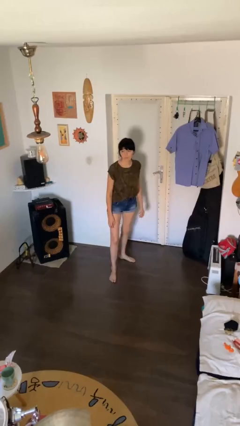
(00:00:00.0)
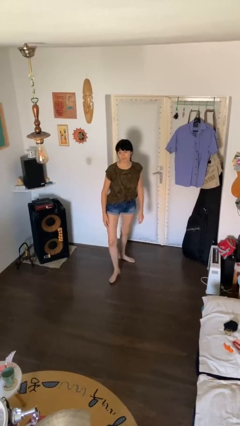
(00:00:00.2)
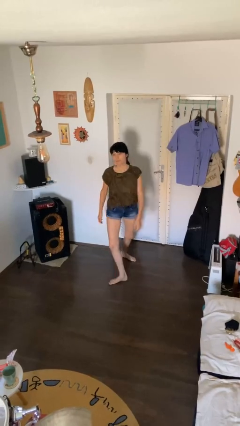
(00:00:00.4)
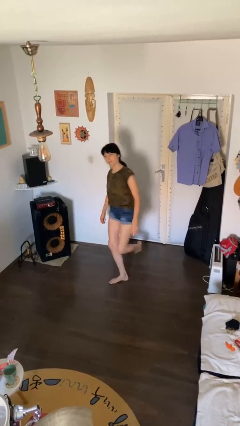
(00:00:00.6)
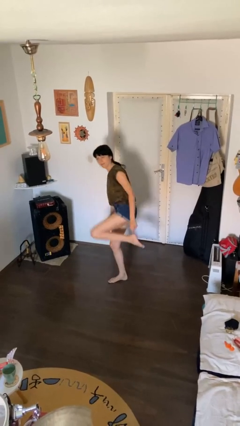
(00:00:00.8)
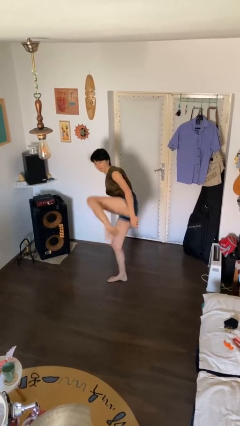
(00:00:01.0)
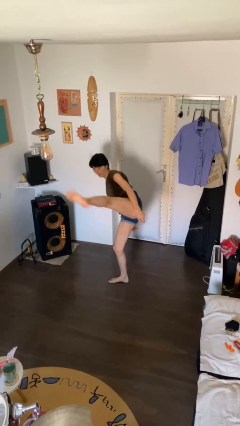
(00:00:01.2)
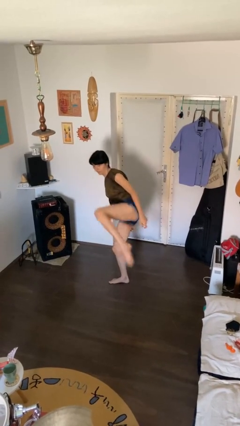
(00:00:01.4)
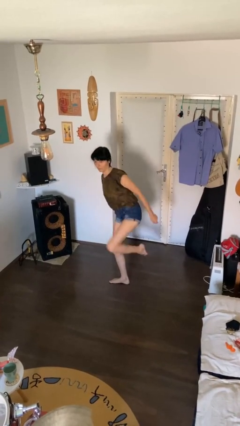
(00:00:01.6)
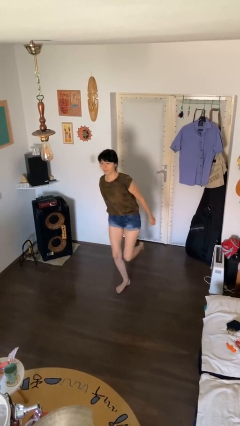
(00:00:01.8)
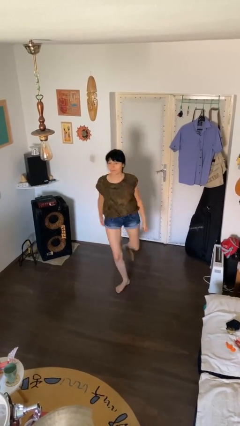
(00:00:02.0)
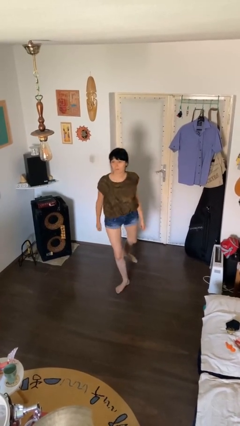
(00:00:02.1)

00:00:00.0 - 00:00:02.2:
person karate kicks

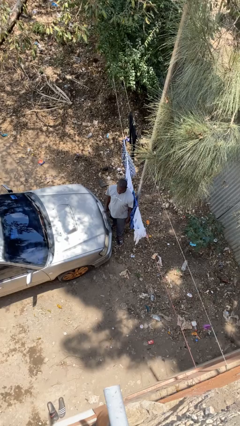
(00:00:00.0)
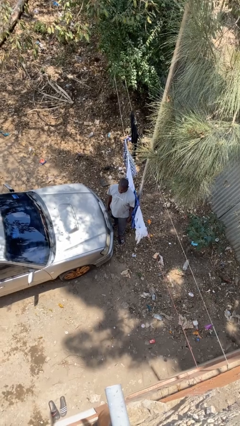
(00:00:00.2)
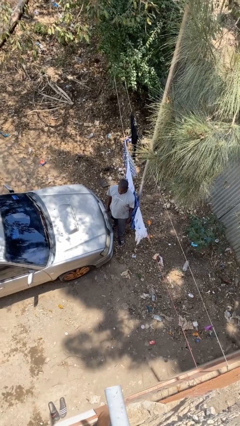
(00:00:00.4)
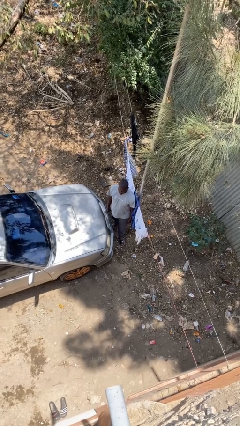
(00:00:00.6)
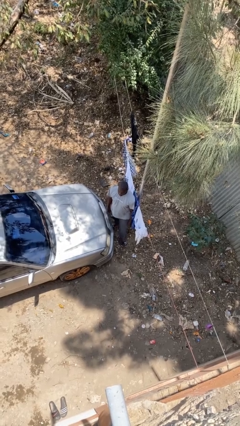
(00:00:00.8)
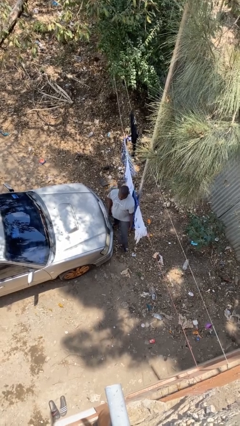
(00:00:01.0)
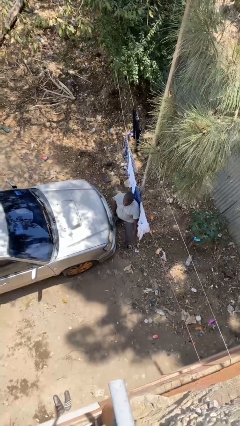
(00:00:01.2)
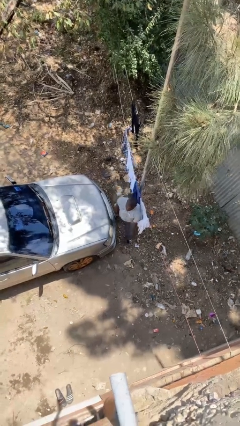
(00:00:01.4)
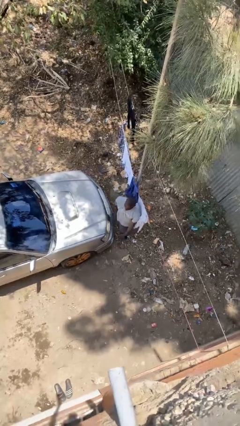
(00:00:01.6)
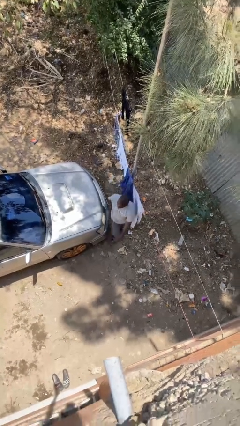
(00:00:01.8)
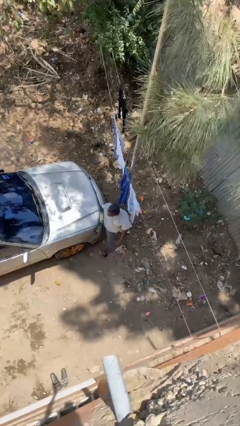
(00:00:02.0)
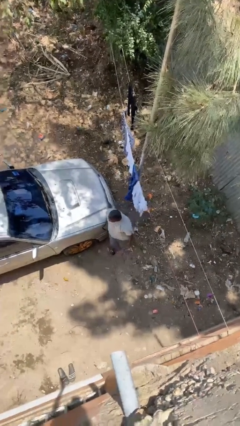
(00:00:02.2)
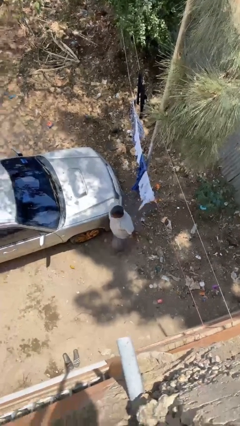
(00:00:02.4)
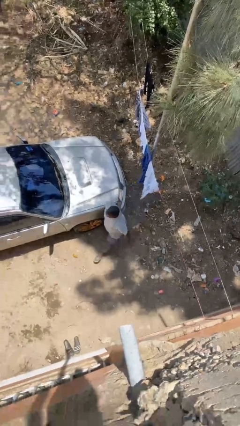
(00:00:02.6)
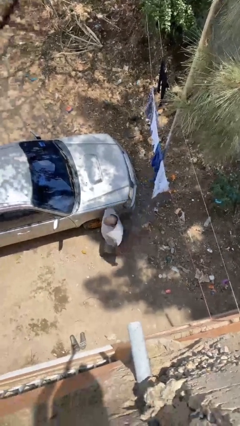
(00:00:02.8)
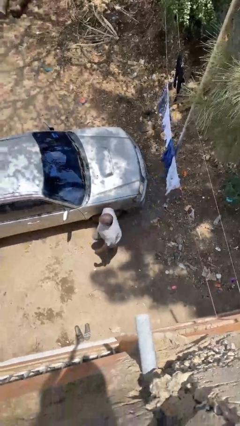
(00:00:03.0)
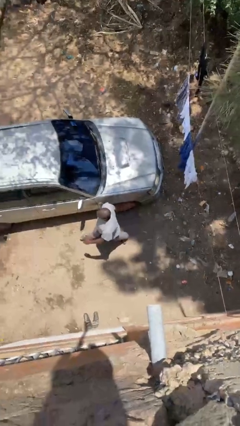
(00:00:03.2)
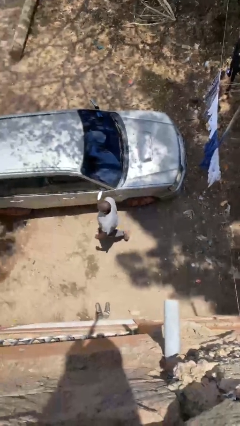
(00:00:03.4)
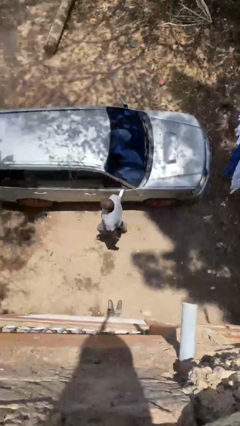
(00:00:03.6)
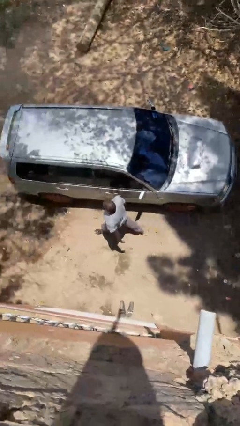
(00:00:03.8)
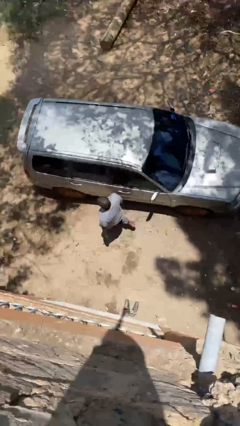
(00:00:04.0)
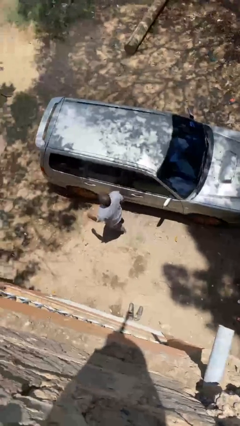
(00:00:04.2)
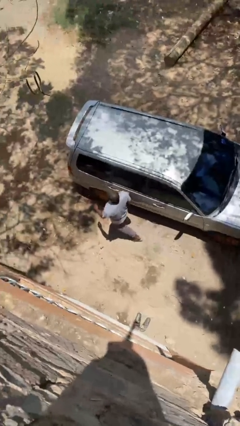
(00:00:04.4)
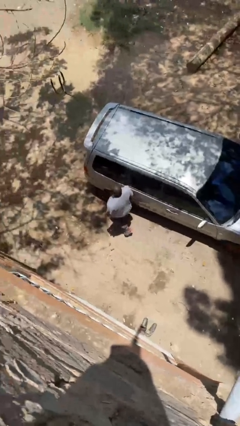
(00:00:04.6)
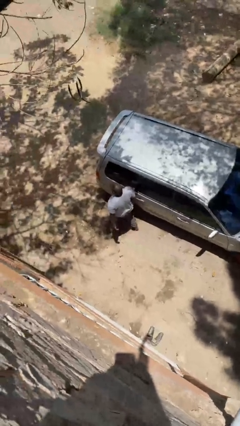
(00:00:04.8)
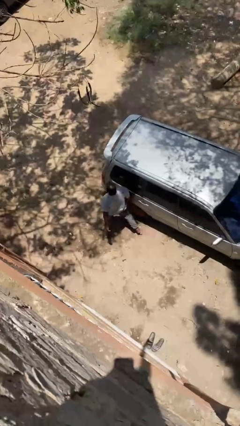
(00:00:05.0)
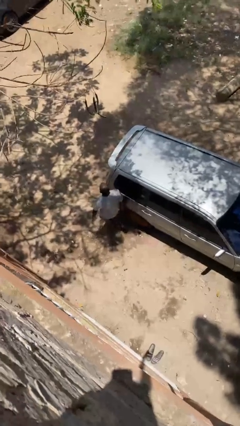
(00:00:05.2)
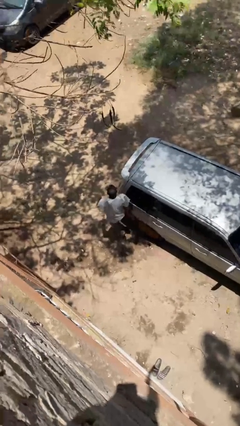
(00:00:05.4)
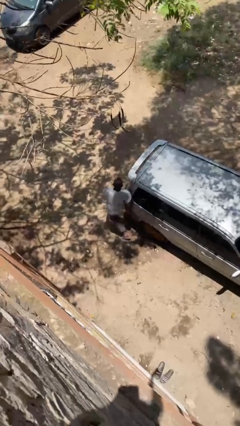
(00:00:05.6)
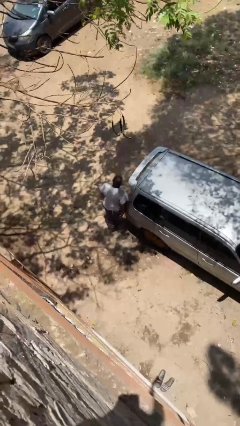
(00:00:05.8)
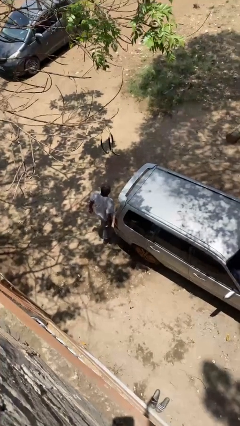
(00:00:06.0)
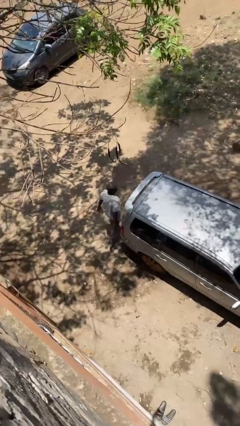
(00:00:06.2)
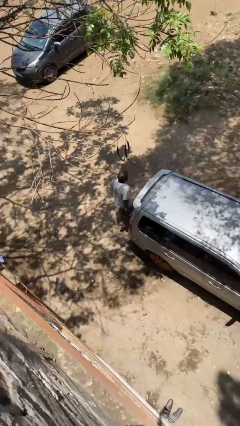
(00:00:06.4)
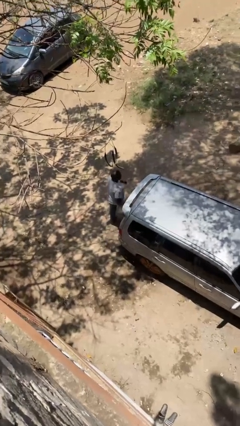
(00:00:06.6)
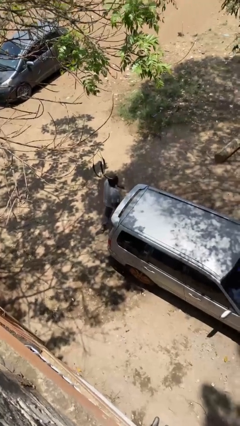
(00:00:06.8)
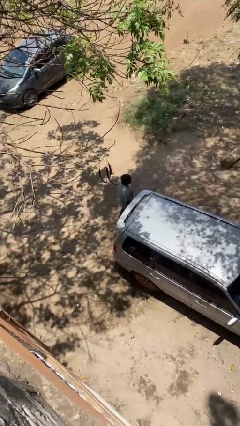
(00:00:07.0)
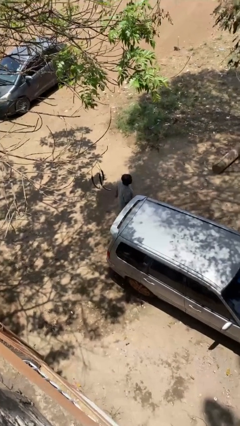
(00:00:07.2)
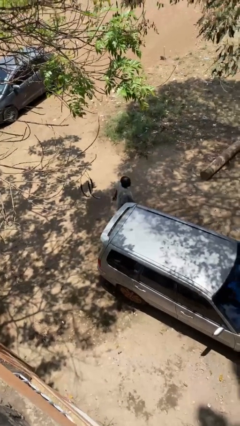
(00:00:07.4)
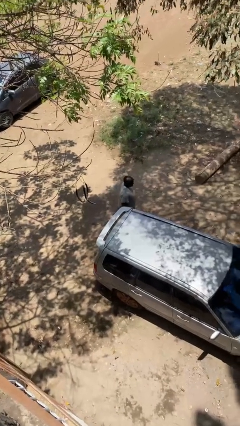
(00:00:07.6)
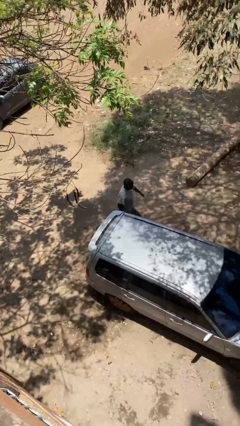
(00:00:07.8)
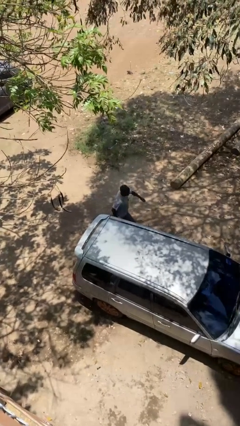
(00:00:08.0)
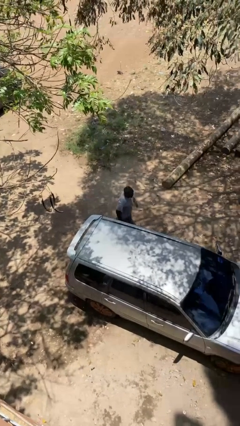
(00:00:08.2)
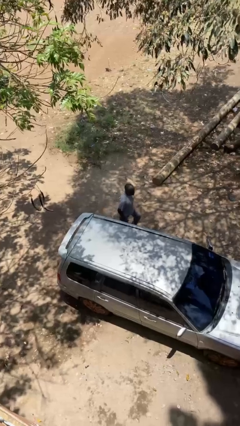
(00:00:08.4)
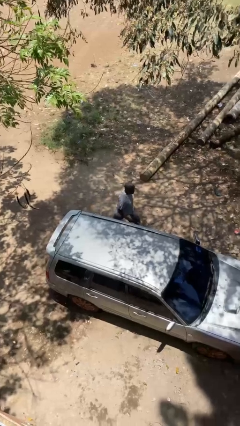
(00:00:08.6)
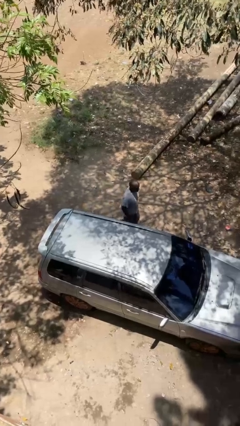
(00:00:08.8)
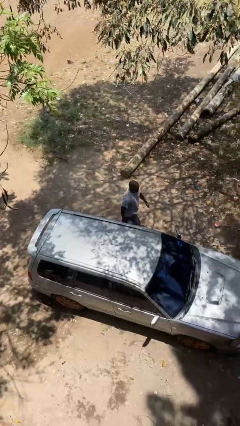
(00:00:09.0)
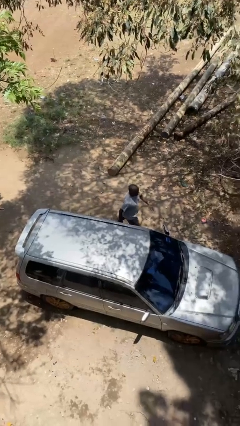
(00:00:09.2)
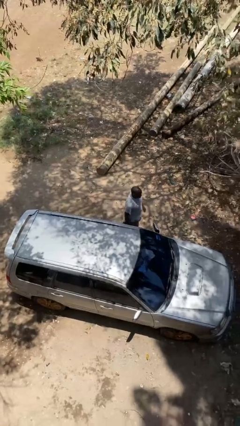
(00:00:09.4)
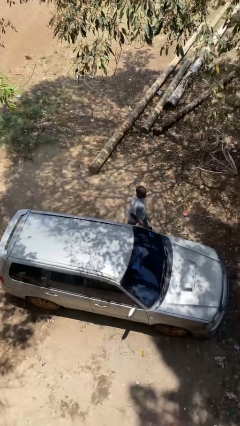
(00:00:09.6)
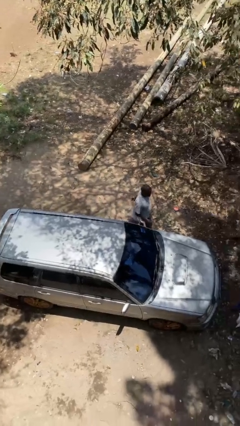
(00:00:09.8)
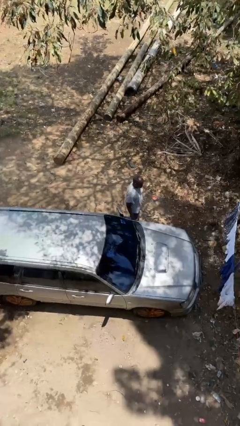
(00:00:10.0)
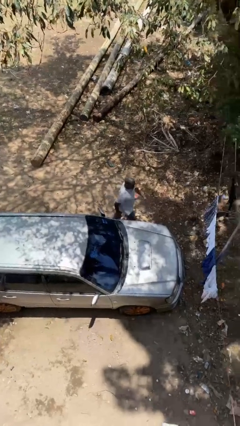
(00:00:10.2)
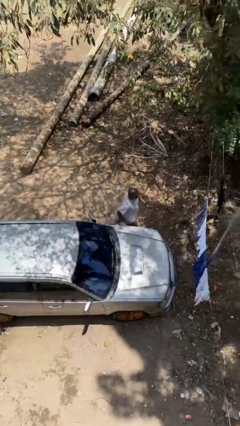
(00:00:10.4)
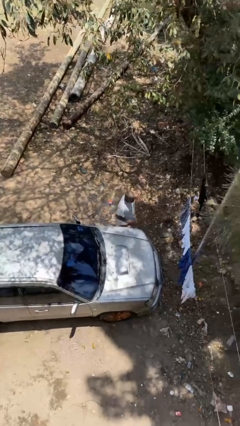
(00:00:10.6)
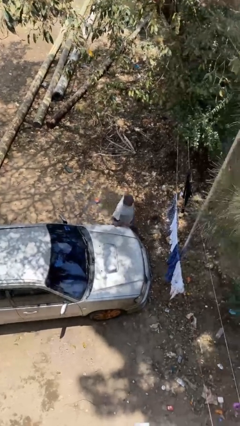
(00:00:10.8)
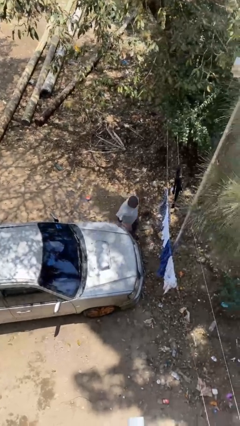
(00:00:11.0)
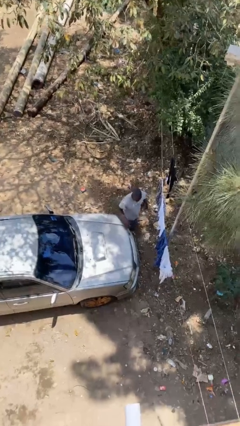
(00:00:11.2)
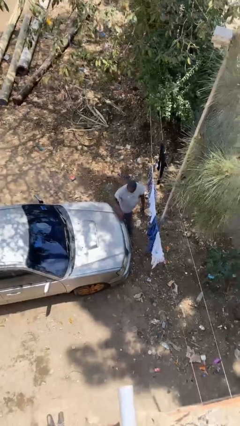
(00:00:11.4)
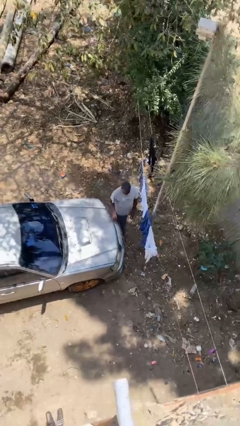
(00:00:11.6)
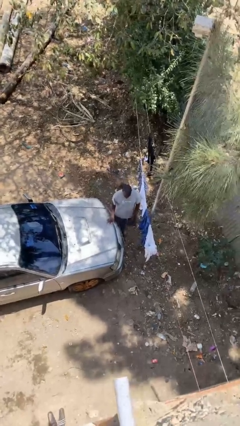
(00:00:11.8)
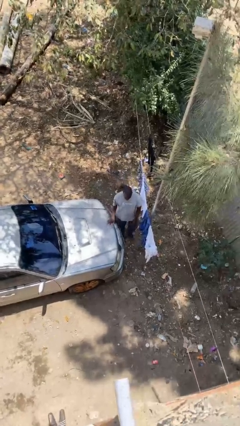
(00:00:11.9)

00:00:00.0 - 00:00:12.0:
person walks around car

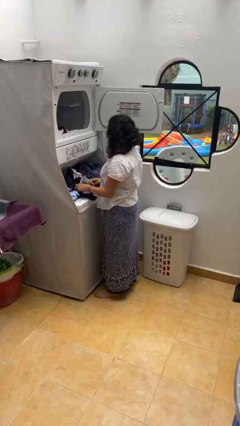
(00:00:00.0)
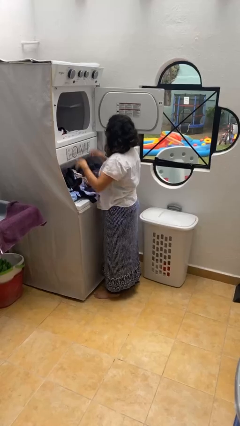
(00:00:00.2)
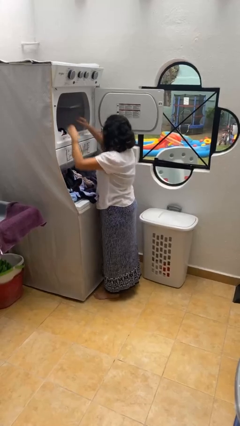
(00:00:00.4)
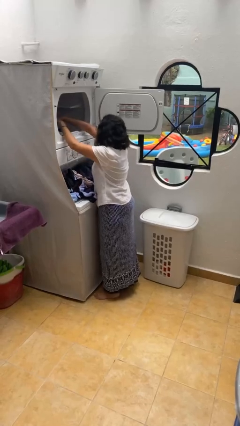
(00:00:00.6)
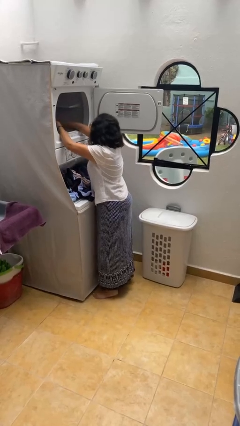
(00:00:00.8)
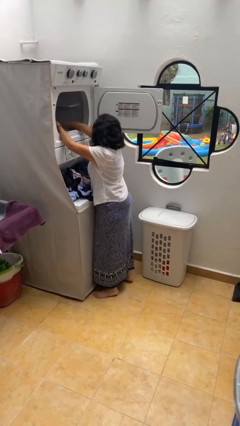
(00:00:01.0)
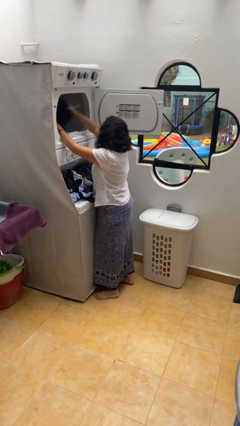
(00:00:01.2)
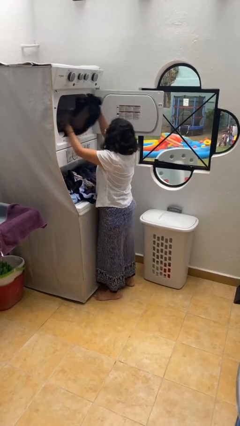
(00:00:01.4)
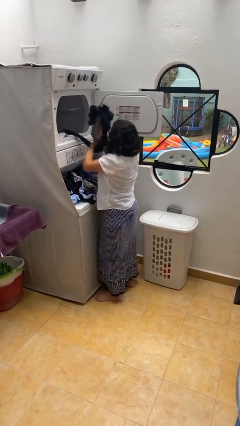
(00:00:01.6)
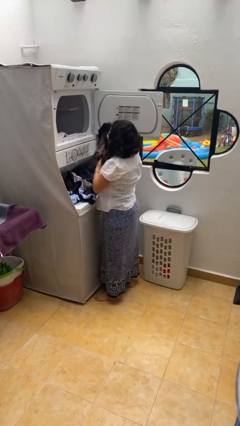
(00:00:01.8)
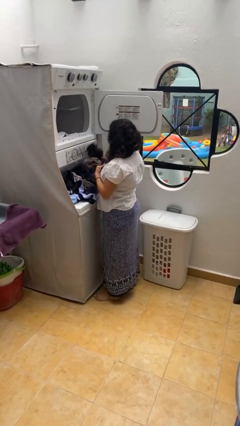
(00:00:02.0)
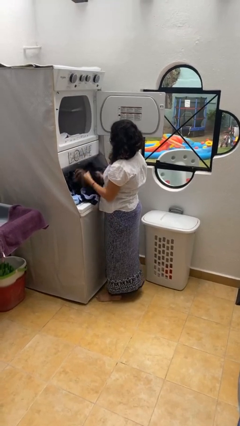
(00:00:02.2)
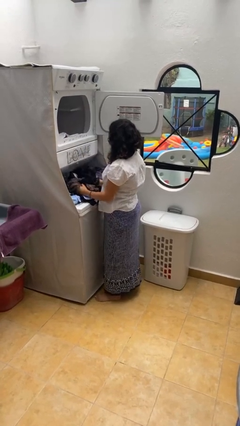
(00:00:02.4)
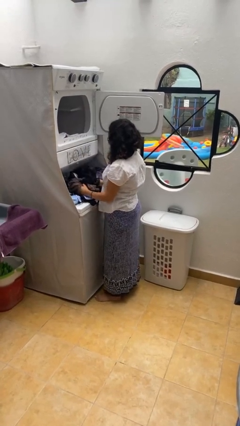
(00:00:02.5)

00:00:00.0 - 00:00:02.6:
person unloads dryer

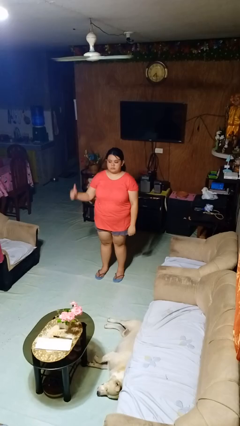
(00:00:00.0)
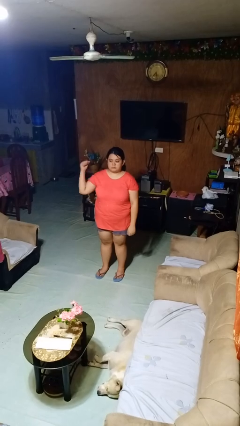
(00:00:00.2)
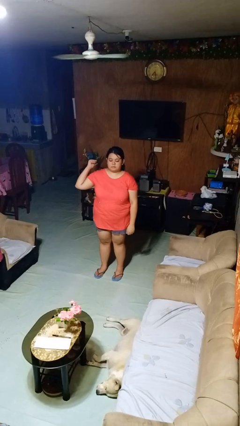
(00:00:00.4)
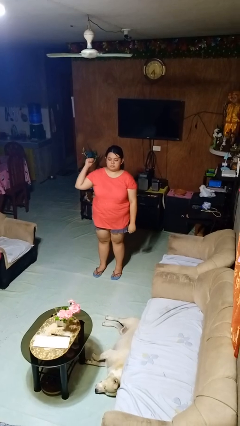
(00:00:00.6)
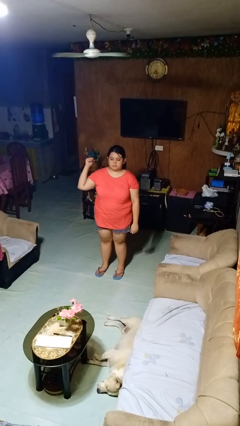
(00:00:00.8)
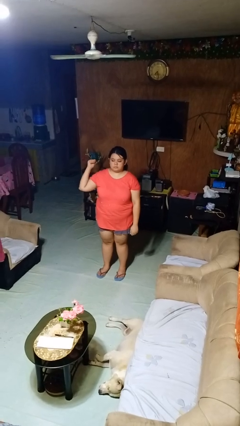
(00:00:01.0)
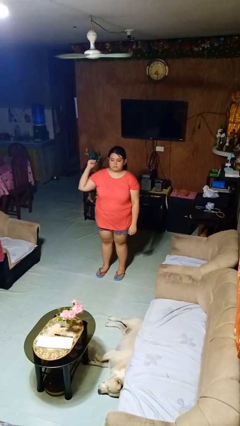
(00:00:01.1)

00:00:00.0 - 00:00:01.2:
person gestures behind me
